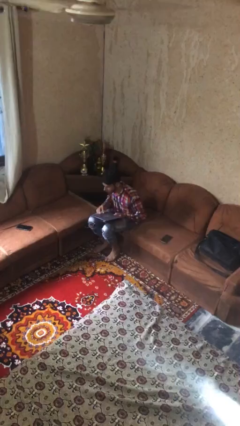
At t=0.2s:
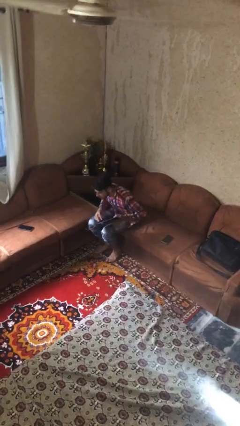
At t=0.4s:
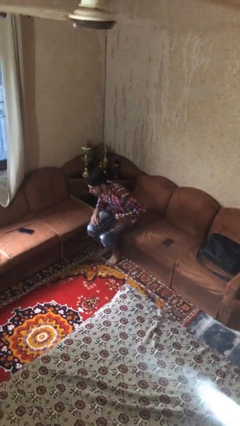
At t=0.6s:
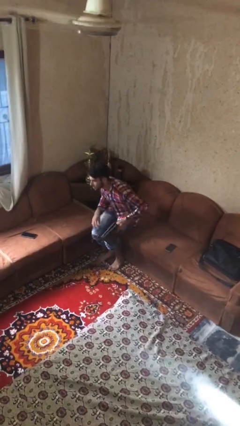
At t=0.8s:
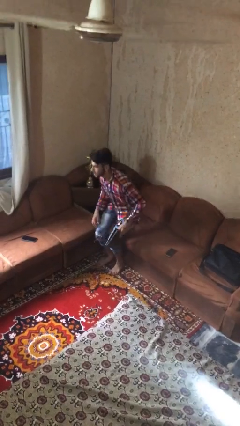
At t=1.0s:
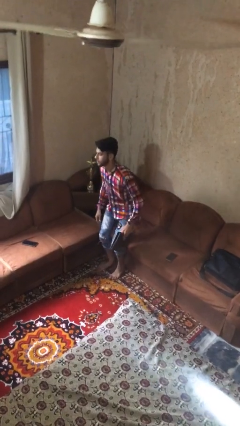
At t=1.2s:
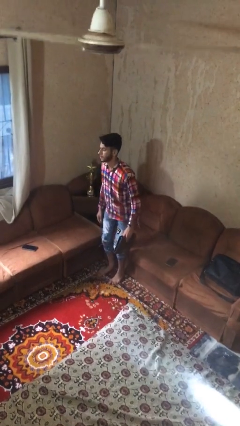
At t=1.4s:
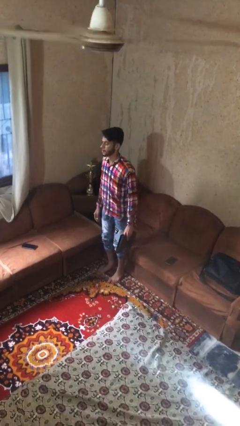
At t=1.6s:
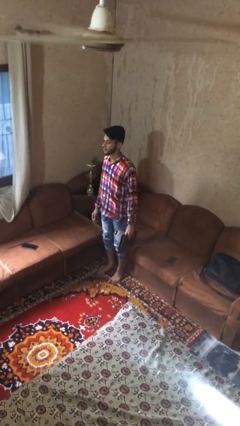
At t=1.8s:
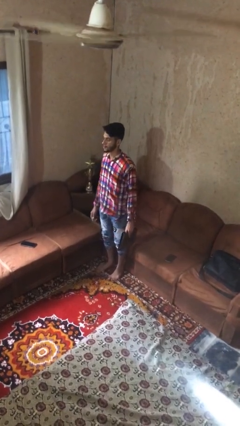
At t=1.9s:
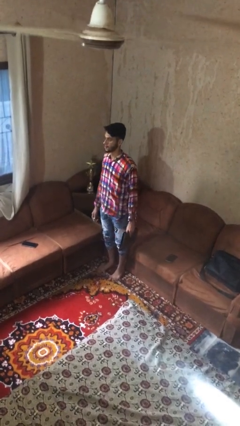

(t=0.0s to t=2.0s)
person stands up

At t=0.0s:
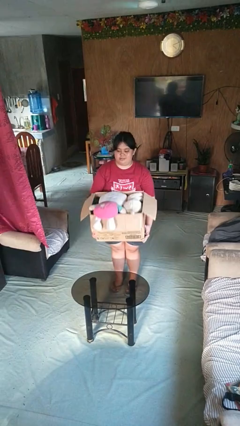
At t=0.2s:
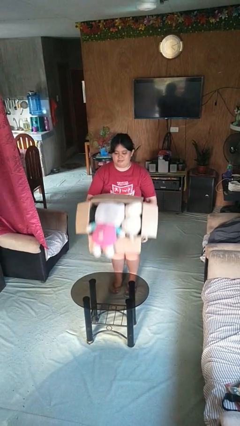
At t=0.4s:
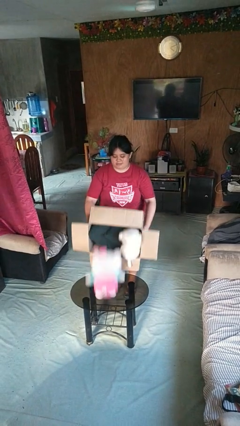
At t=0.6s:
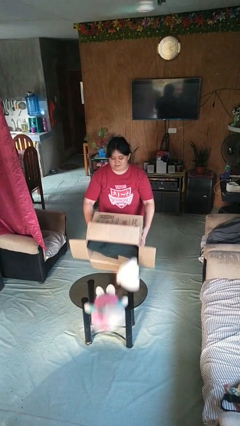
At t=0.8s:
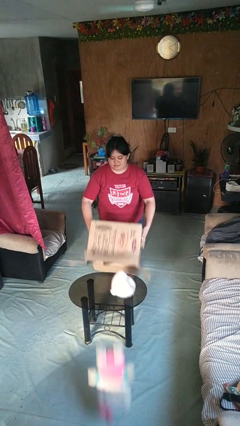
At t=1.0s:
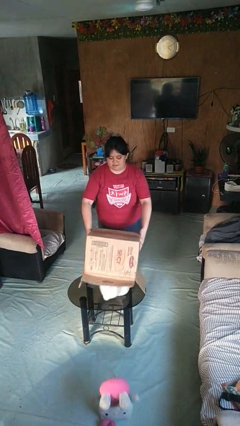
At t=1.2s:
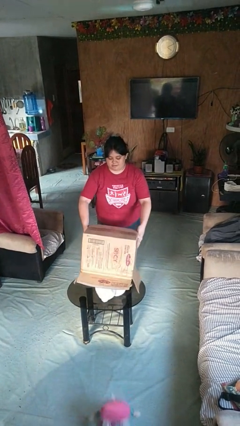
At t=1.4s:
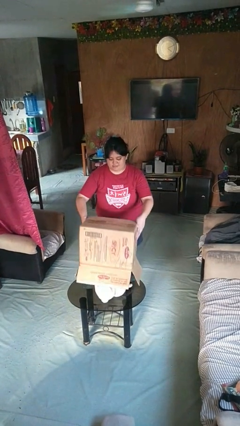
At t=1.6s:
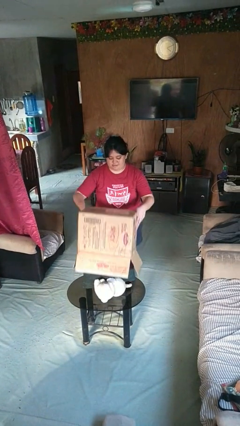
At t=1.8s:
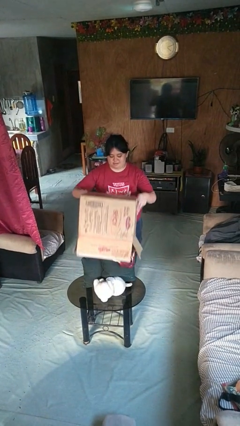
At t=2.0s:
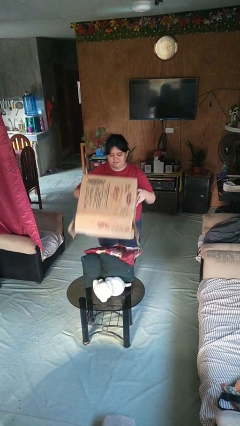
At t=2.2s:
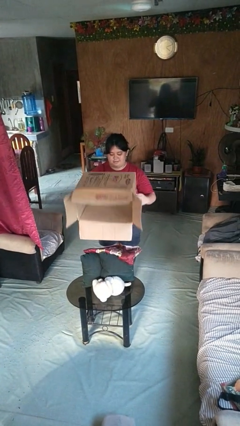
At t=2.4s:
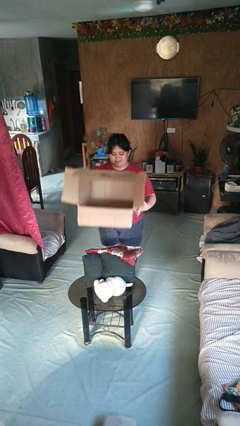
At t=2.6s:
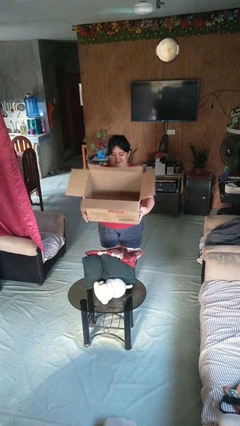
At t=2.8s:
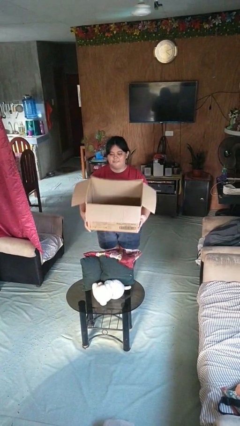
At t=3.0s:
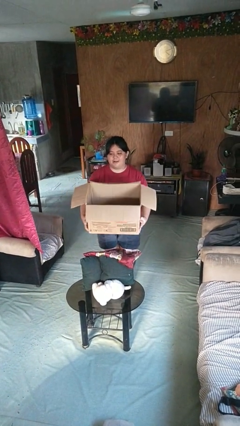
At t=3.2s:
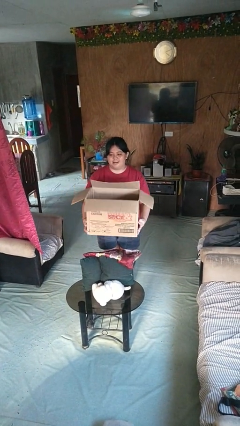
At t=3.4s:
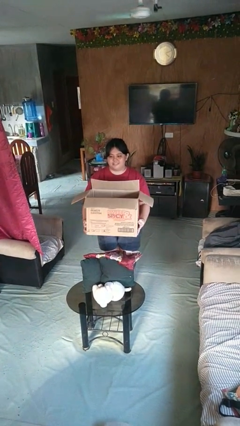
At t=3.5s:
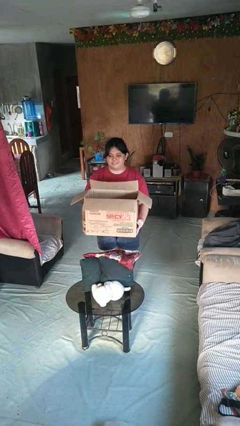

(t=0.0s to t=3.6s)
person unloads box onto table

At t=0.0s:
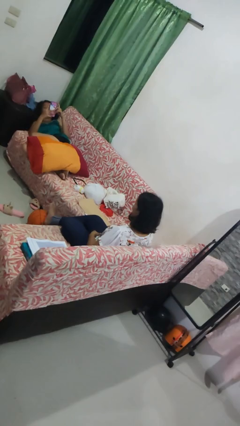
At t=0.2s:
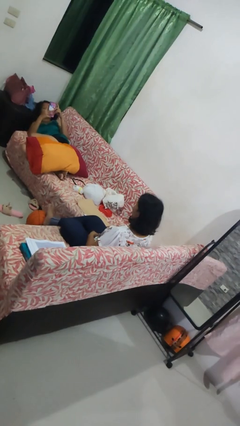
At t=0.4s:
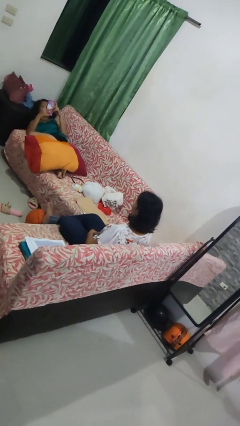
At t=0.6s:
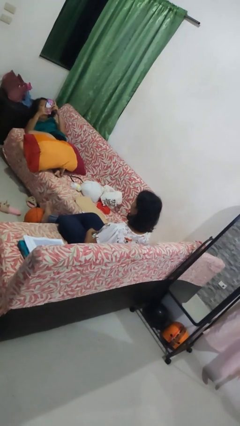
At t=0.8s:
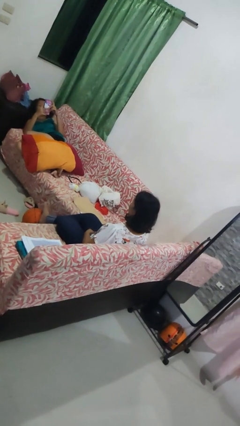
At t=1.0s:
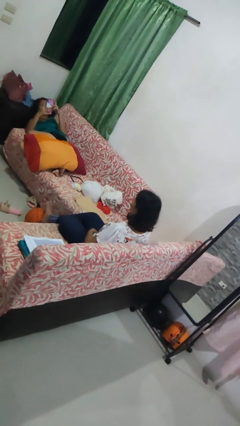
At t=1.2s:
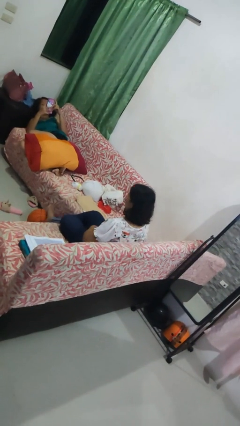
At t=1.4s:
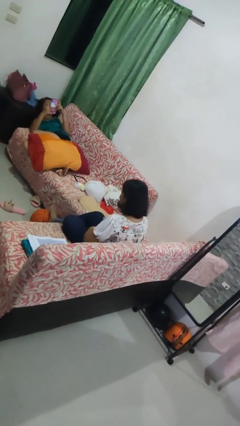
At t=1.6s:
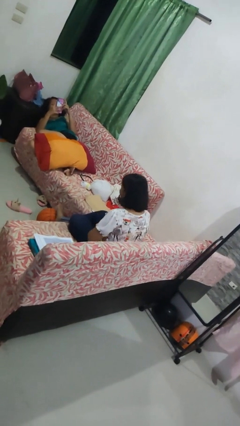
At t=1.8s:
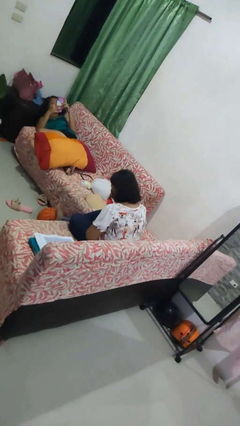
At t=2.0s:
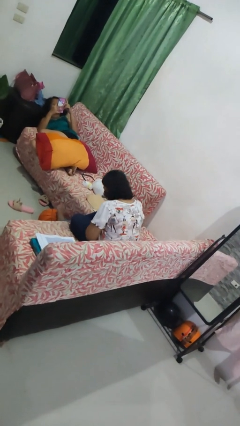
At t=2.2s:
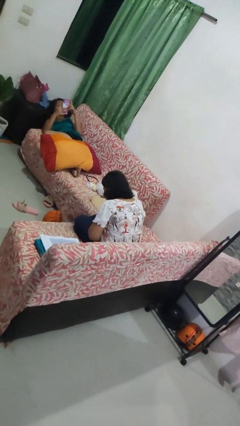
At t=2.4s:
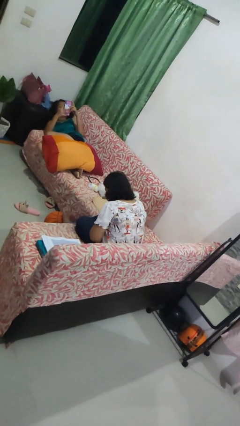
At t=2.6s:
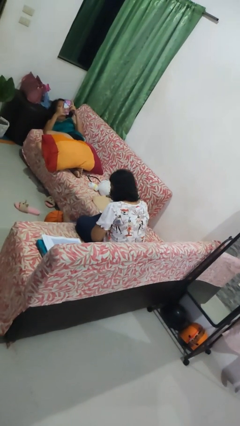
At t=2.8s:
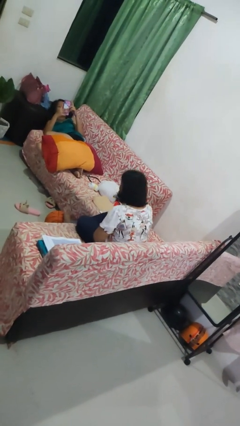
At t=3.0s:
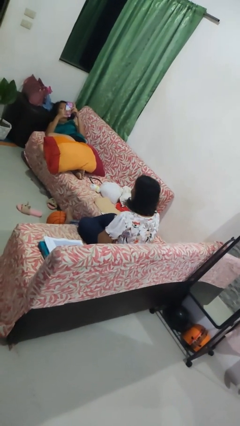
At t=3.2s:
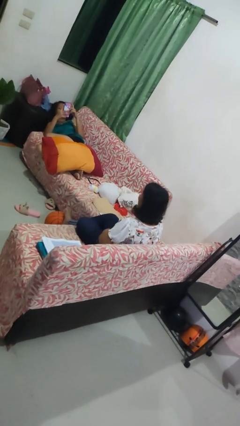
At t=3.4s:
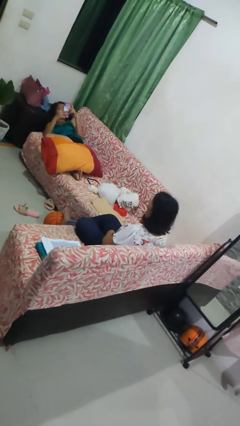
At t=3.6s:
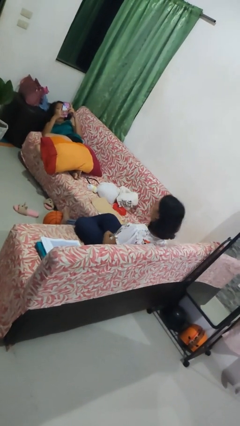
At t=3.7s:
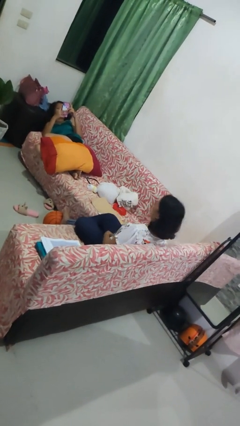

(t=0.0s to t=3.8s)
person laughs with person

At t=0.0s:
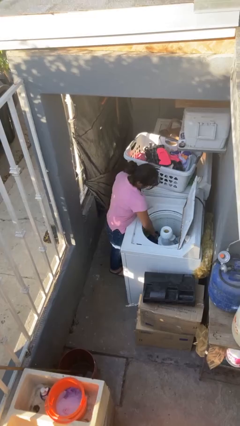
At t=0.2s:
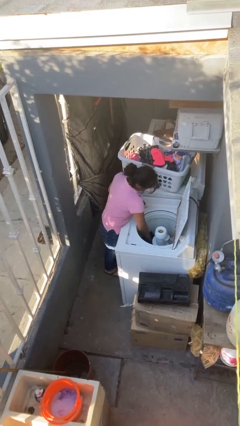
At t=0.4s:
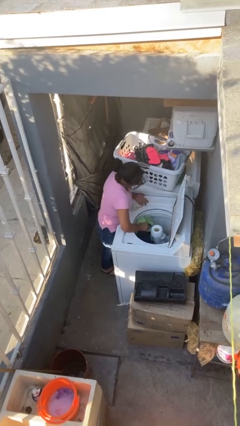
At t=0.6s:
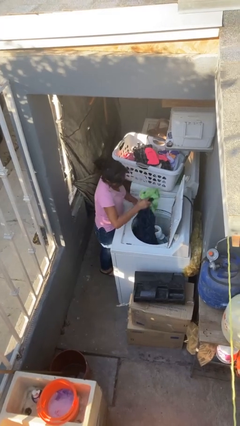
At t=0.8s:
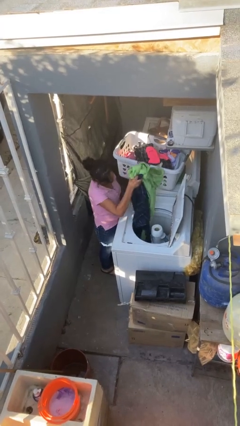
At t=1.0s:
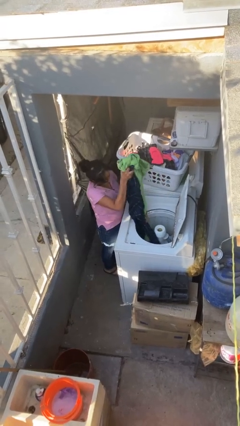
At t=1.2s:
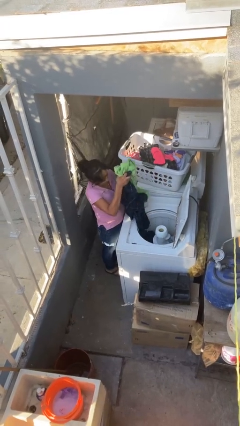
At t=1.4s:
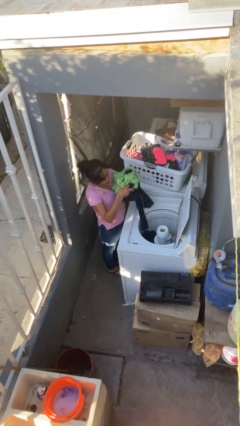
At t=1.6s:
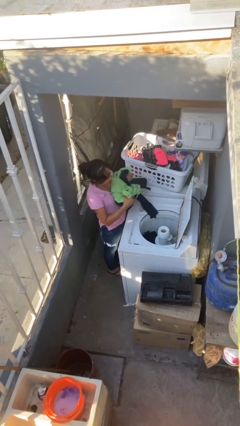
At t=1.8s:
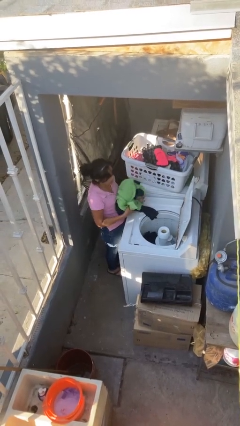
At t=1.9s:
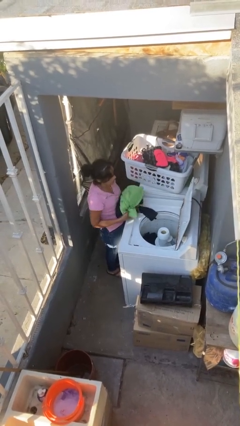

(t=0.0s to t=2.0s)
person loads clotheswasher

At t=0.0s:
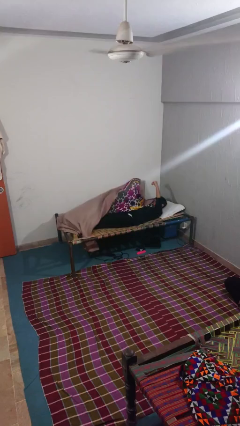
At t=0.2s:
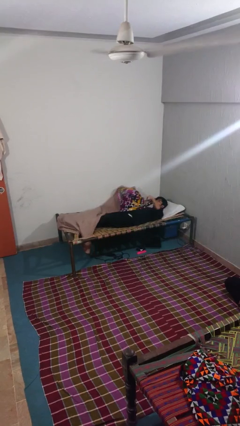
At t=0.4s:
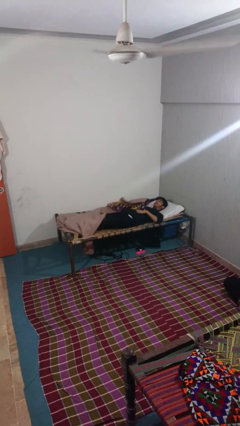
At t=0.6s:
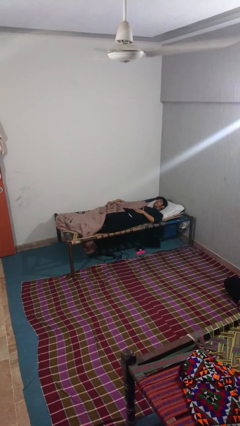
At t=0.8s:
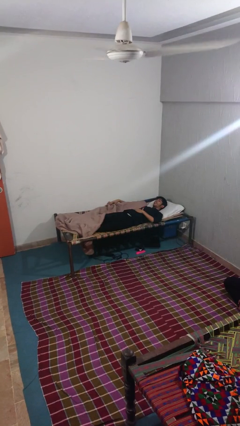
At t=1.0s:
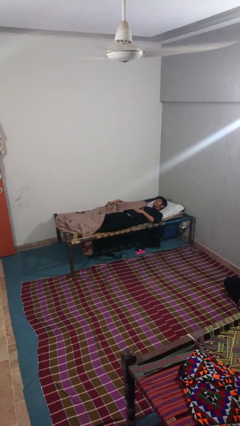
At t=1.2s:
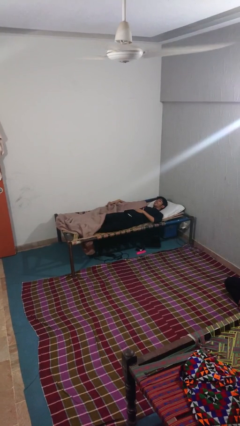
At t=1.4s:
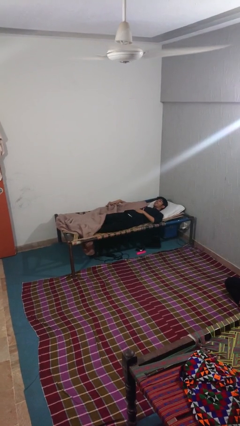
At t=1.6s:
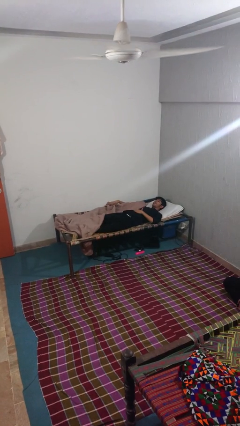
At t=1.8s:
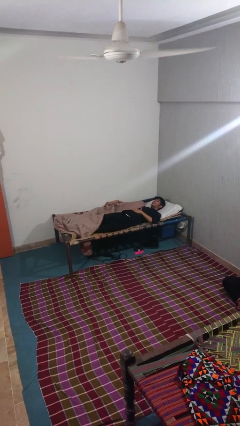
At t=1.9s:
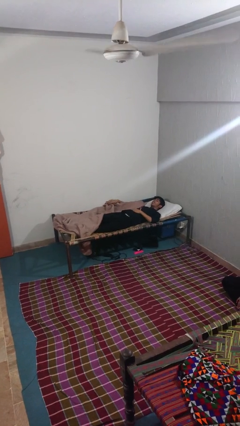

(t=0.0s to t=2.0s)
person uncovers with blanket

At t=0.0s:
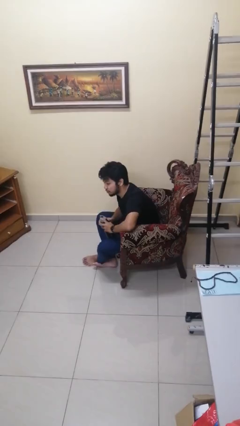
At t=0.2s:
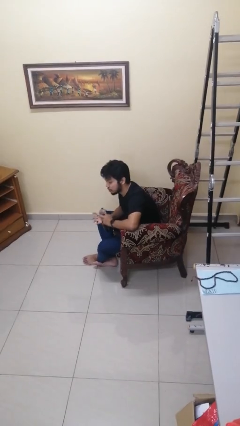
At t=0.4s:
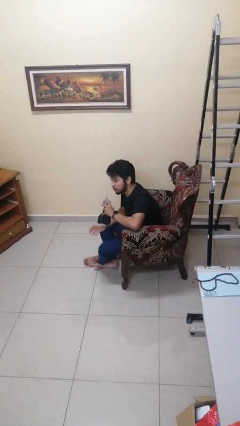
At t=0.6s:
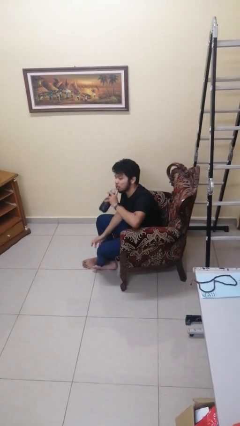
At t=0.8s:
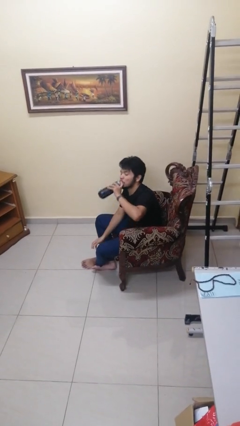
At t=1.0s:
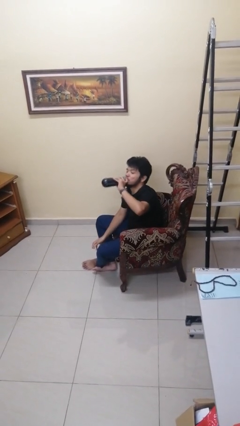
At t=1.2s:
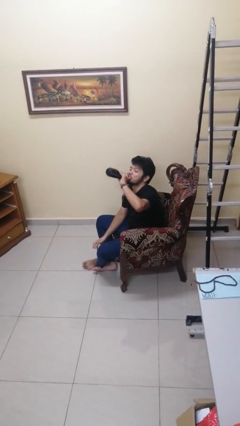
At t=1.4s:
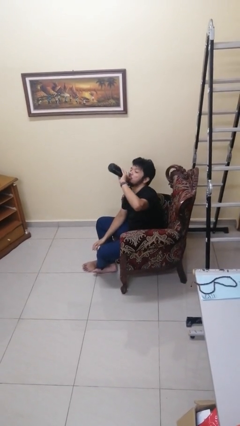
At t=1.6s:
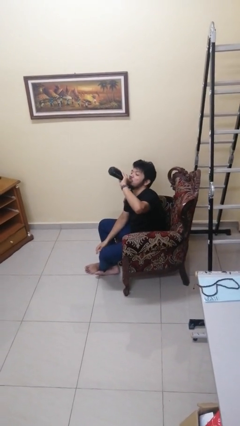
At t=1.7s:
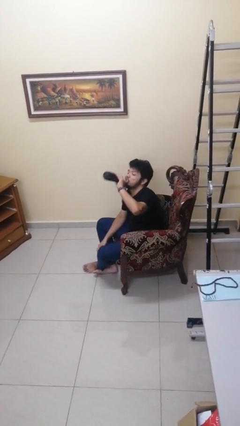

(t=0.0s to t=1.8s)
person drinks from bottle

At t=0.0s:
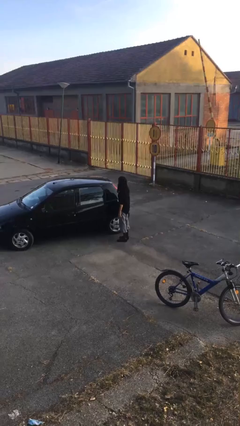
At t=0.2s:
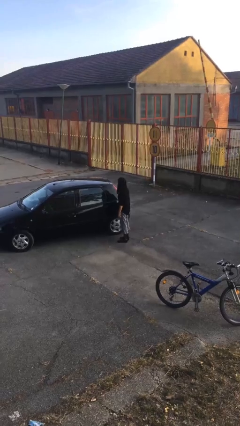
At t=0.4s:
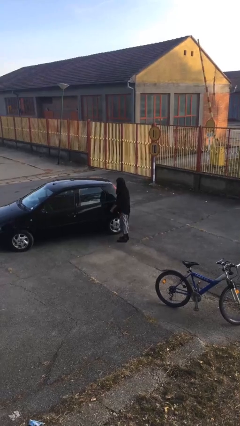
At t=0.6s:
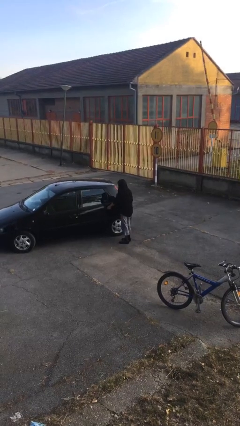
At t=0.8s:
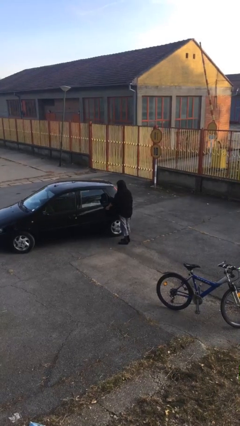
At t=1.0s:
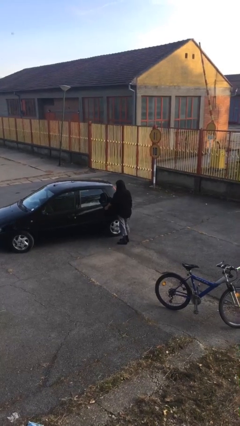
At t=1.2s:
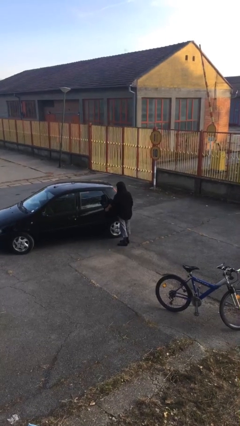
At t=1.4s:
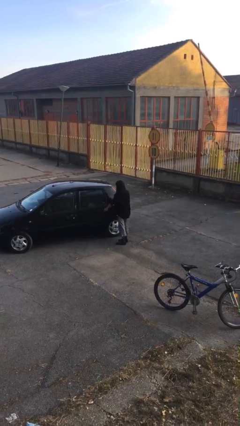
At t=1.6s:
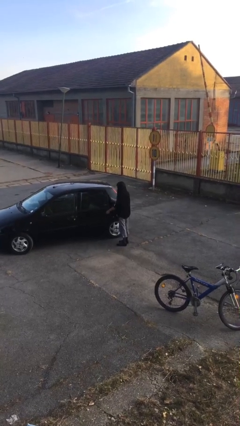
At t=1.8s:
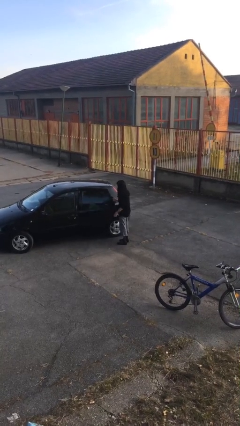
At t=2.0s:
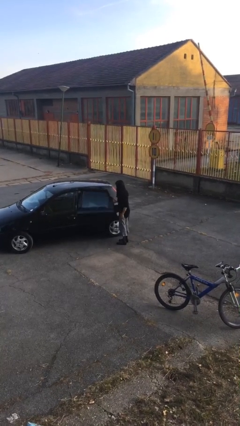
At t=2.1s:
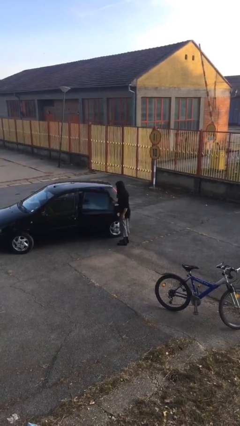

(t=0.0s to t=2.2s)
person opens car door
